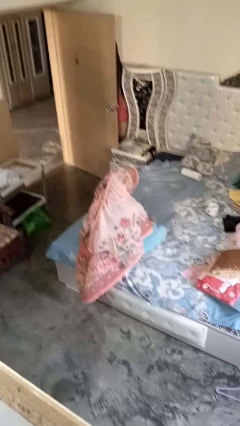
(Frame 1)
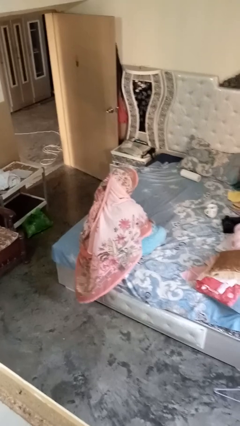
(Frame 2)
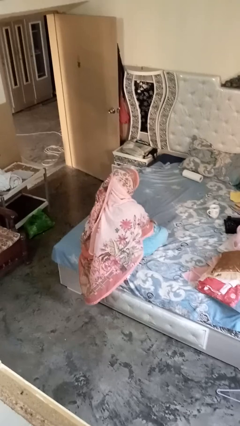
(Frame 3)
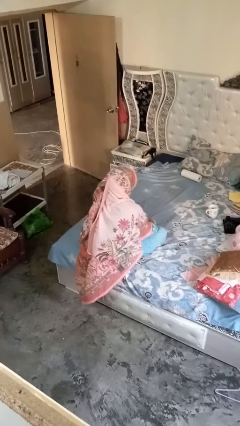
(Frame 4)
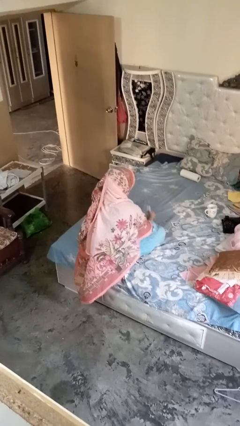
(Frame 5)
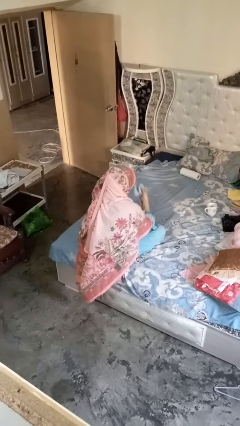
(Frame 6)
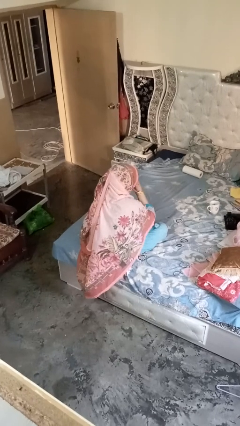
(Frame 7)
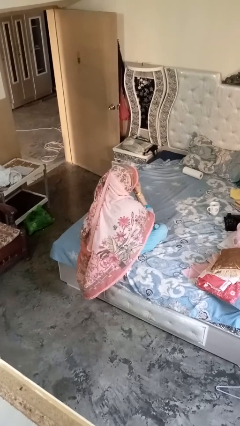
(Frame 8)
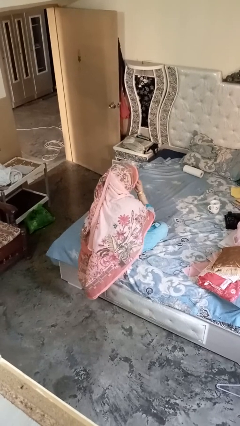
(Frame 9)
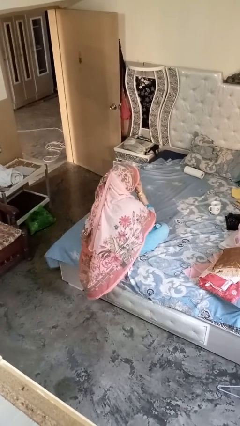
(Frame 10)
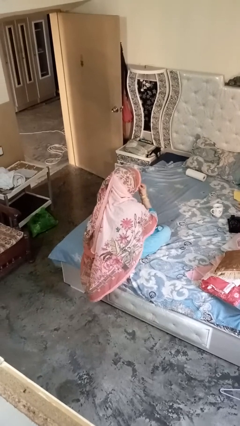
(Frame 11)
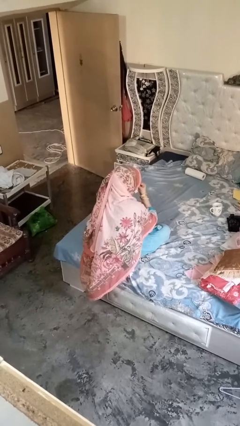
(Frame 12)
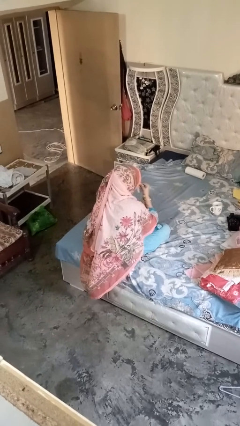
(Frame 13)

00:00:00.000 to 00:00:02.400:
person blows nose

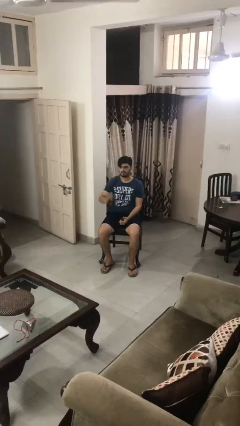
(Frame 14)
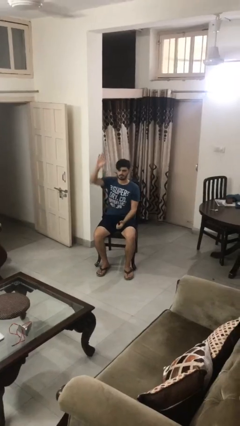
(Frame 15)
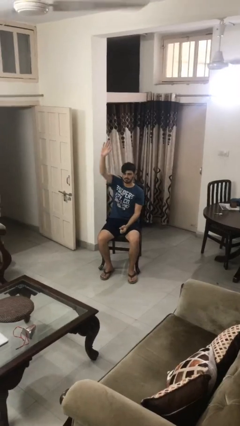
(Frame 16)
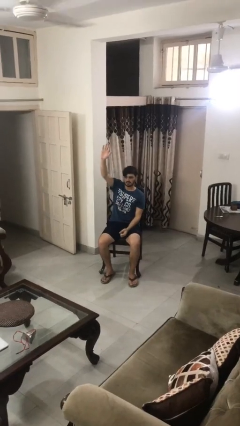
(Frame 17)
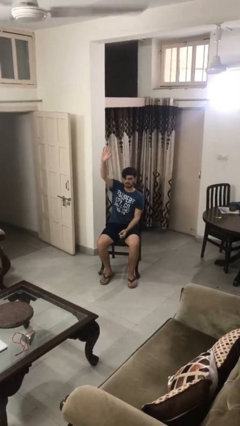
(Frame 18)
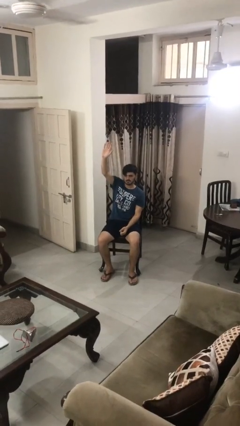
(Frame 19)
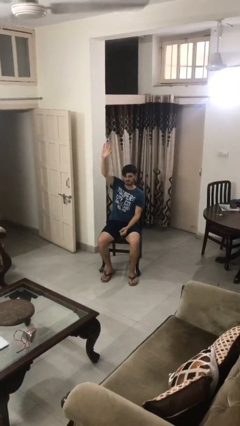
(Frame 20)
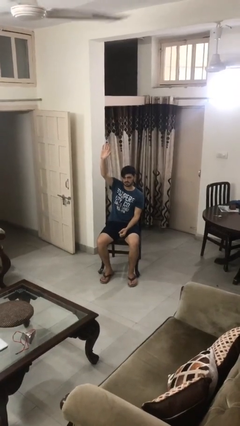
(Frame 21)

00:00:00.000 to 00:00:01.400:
person gestures raise hand

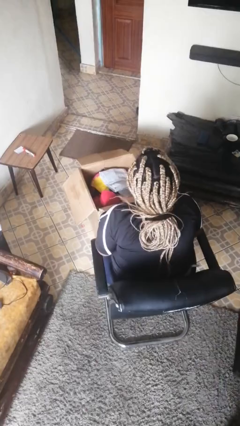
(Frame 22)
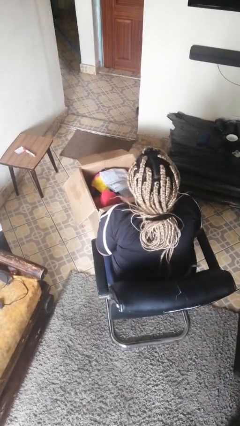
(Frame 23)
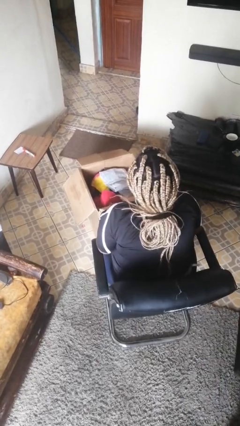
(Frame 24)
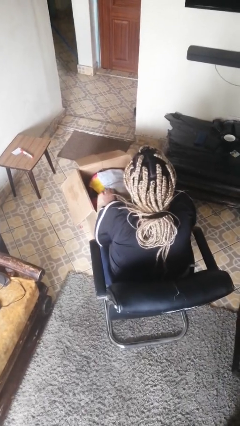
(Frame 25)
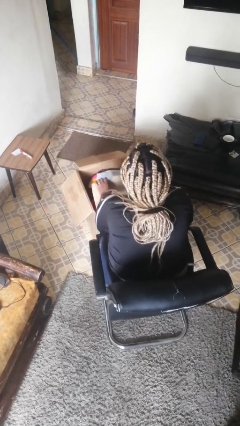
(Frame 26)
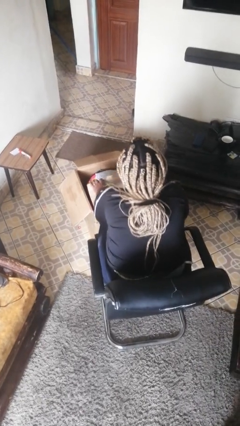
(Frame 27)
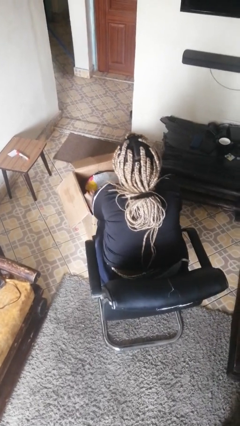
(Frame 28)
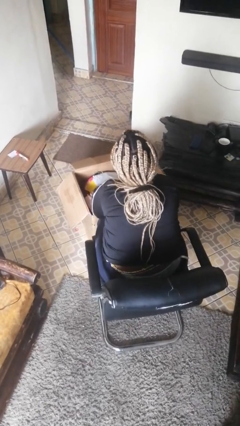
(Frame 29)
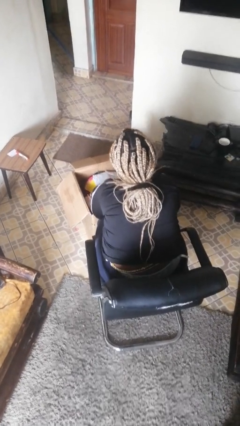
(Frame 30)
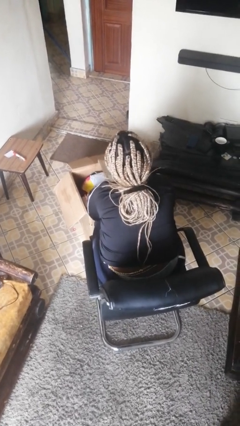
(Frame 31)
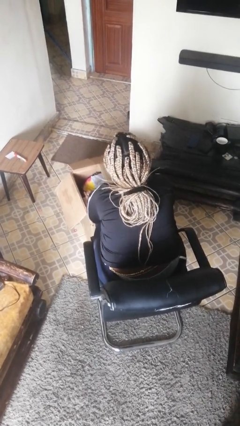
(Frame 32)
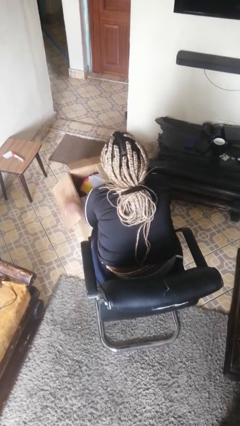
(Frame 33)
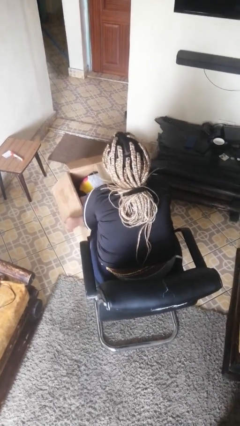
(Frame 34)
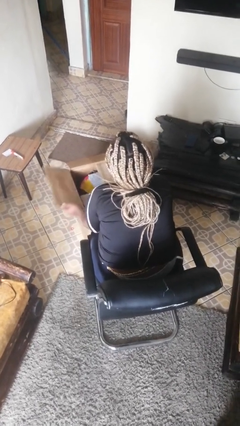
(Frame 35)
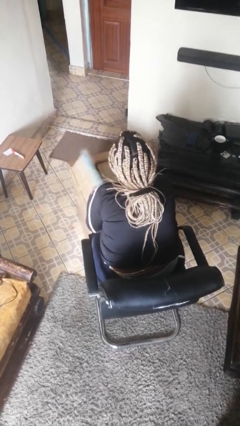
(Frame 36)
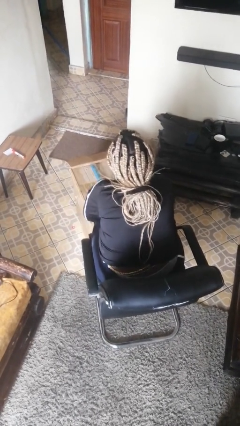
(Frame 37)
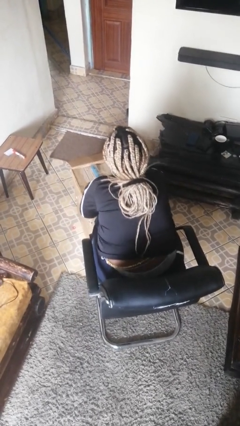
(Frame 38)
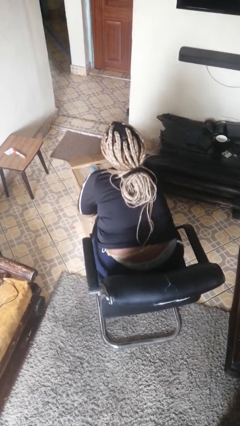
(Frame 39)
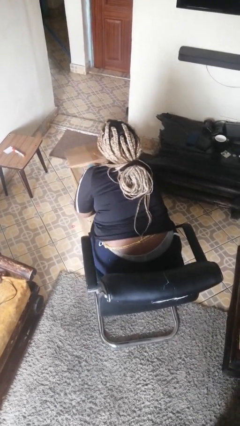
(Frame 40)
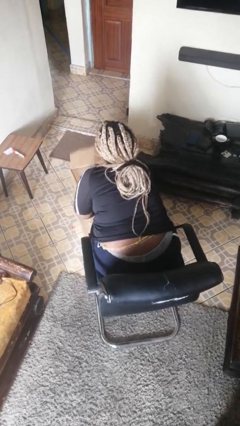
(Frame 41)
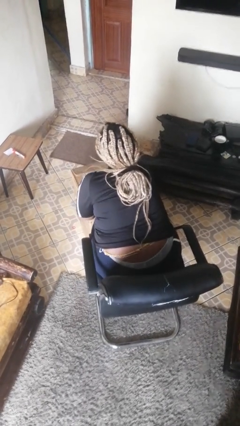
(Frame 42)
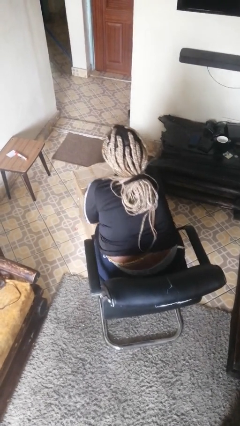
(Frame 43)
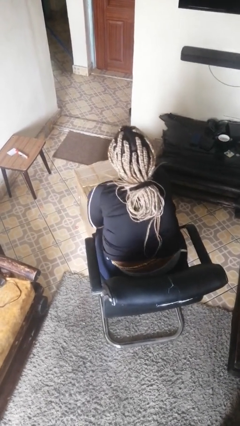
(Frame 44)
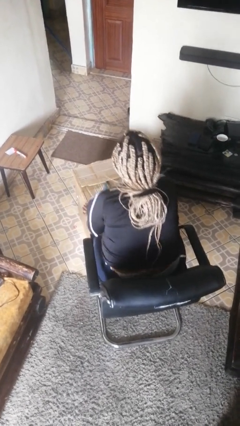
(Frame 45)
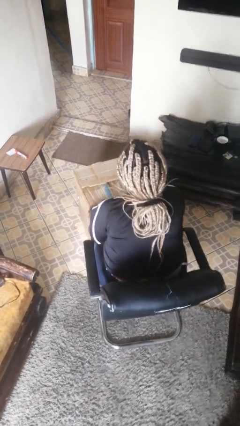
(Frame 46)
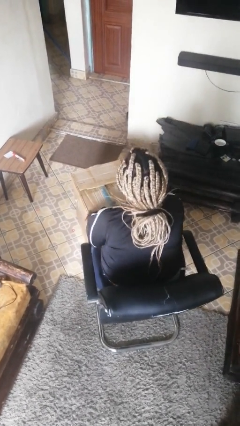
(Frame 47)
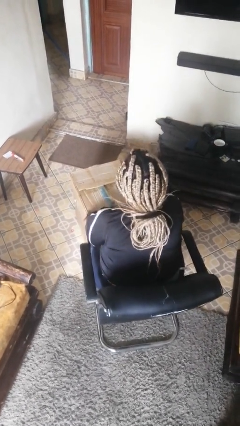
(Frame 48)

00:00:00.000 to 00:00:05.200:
person closes box

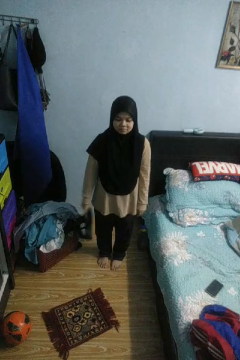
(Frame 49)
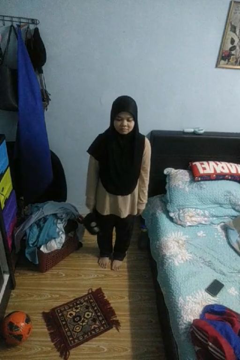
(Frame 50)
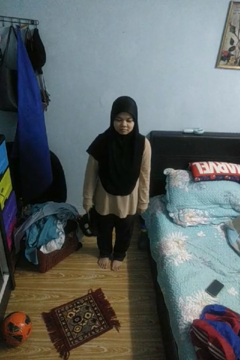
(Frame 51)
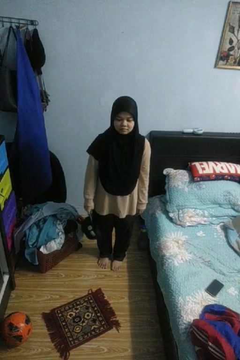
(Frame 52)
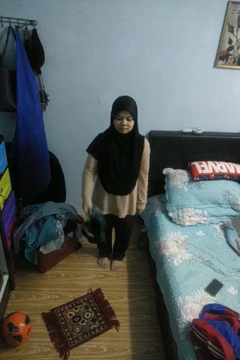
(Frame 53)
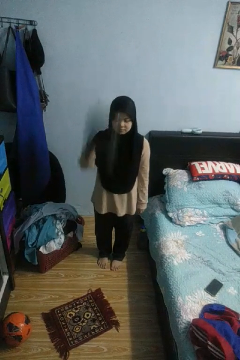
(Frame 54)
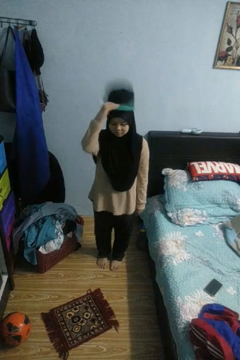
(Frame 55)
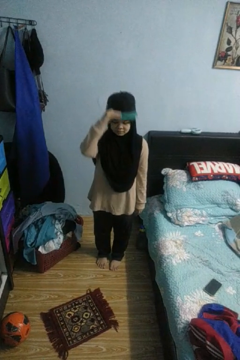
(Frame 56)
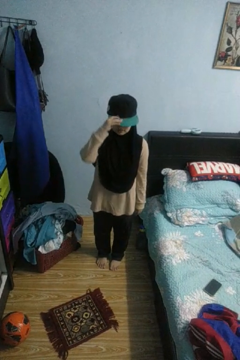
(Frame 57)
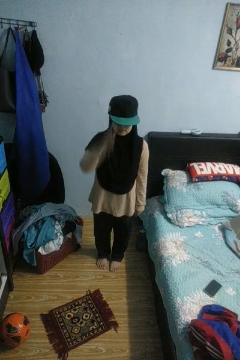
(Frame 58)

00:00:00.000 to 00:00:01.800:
person puts on hat

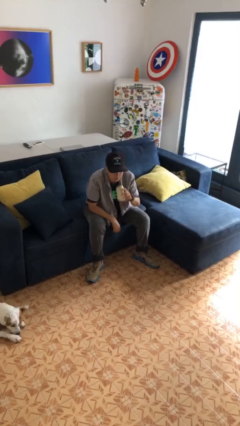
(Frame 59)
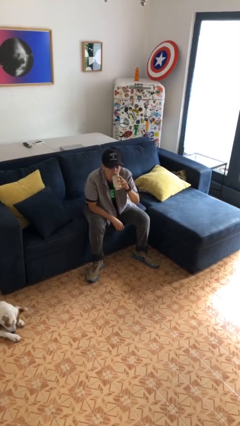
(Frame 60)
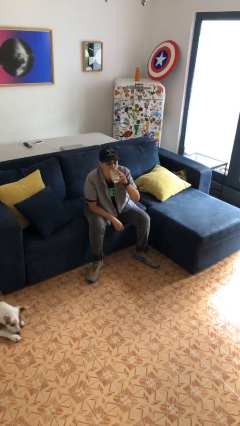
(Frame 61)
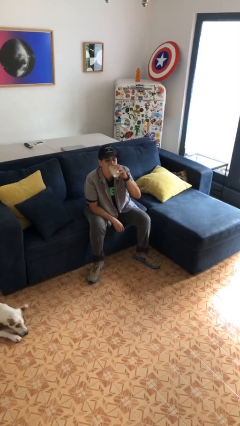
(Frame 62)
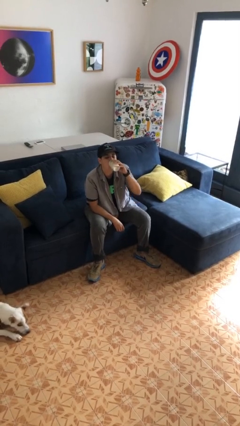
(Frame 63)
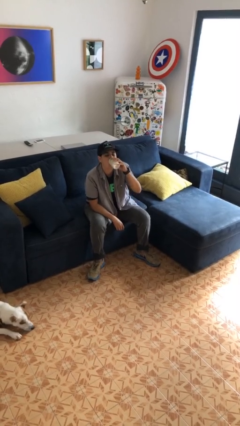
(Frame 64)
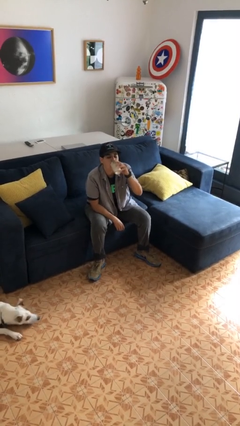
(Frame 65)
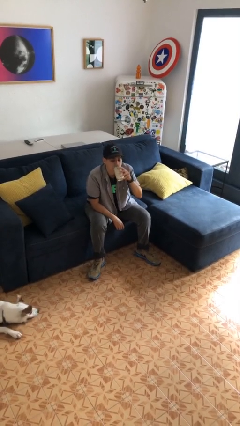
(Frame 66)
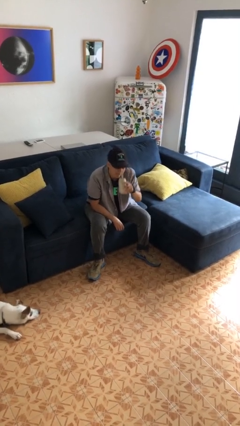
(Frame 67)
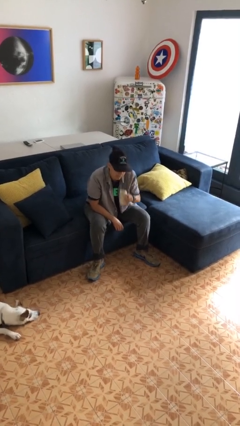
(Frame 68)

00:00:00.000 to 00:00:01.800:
person drinks from beverage can

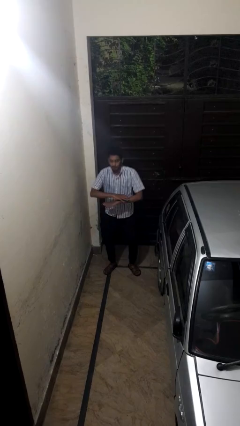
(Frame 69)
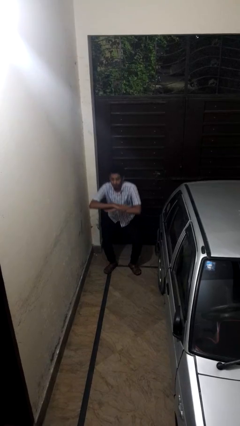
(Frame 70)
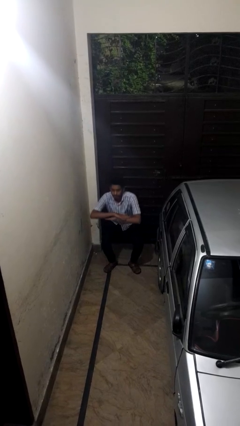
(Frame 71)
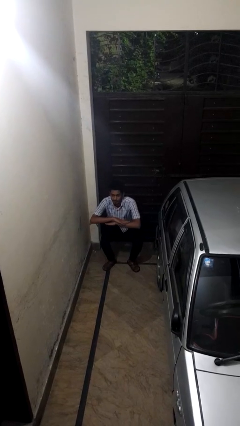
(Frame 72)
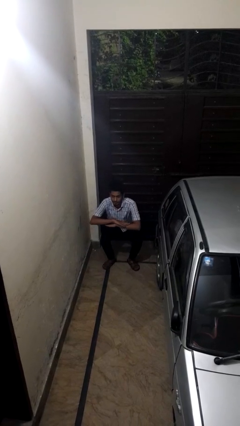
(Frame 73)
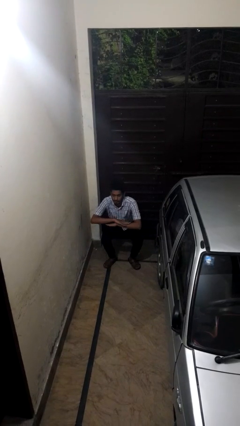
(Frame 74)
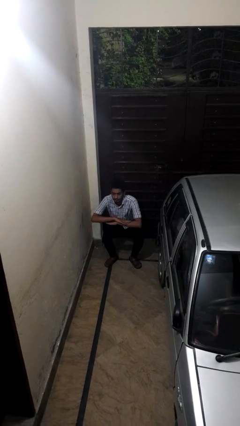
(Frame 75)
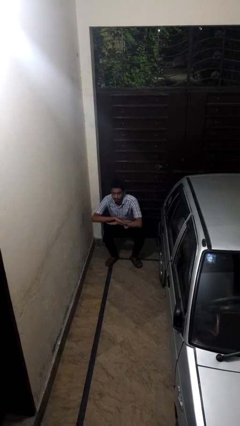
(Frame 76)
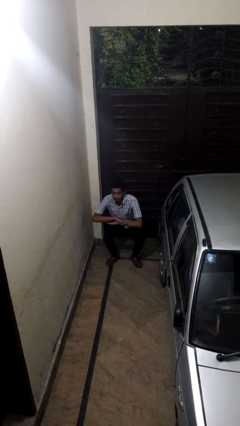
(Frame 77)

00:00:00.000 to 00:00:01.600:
person squats

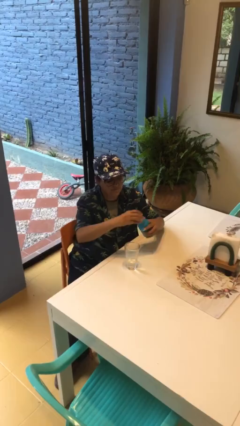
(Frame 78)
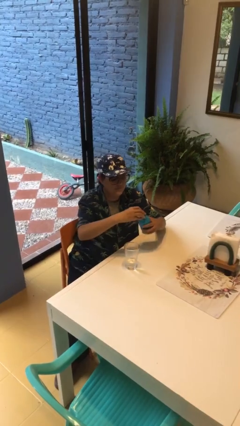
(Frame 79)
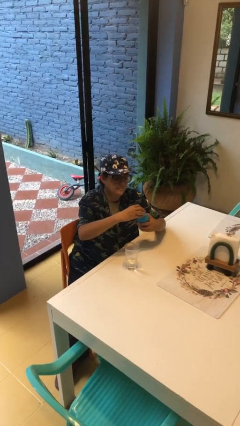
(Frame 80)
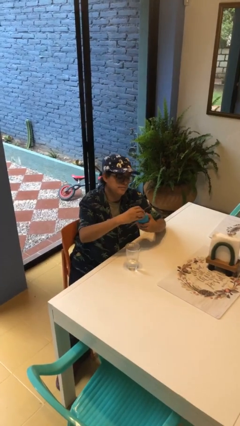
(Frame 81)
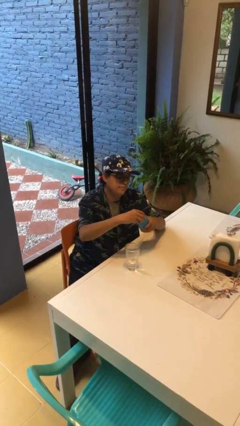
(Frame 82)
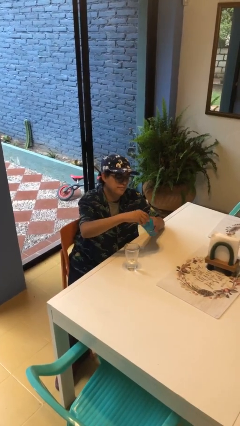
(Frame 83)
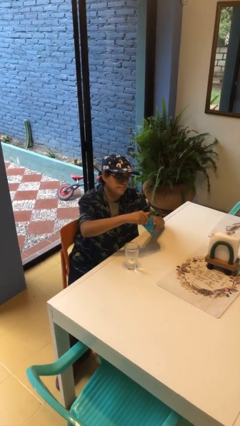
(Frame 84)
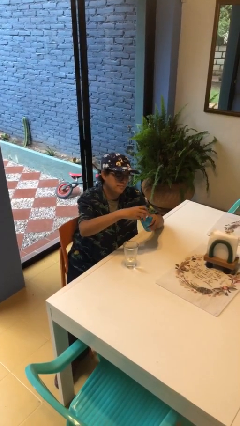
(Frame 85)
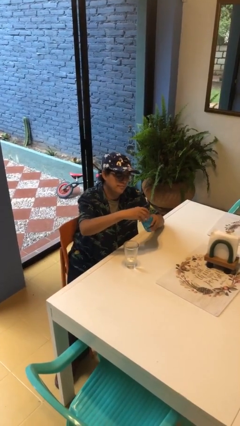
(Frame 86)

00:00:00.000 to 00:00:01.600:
person screws lid to bottle

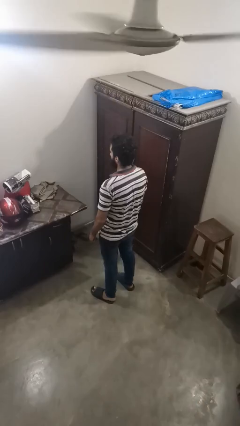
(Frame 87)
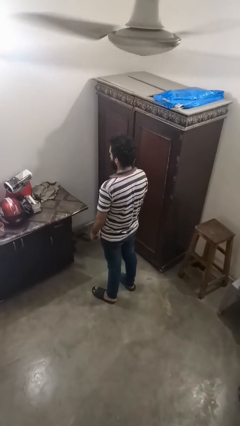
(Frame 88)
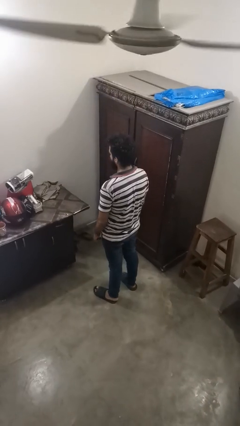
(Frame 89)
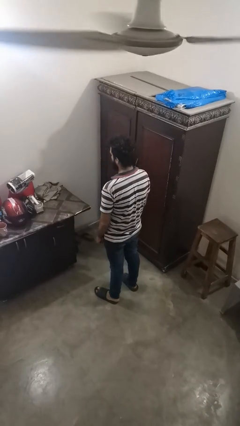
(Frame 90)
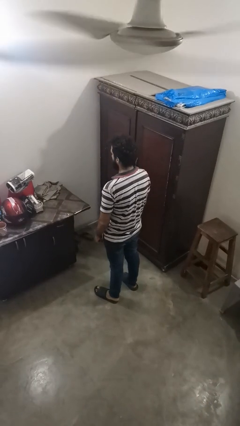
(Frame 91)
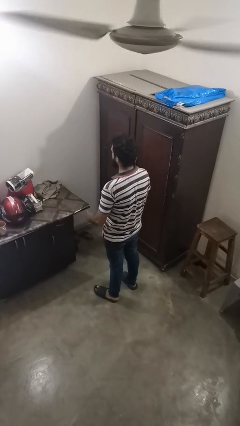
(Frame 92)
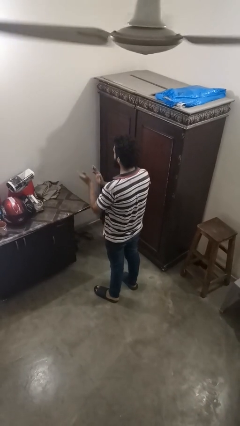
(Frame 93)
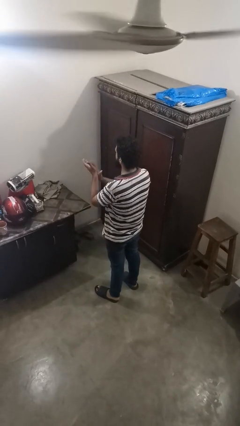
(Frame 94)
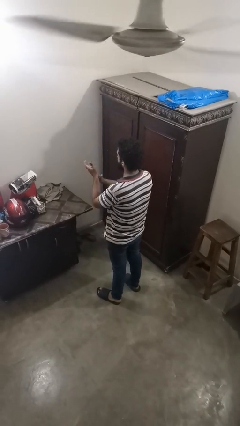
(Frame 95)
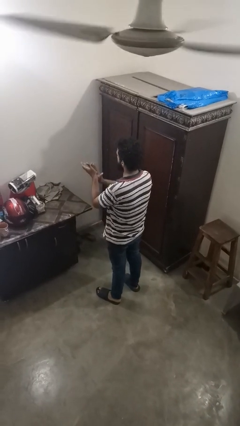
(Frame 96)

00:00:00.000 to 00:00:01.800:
person claps hands
